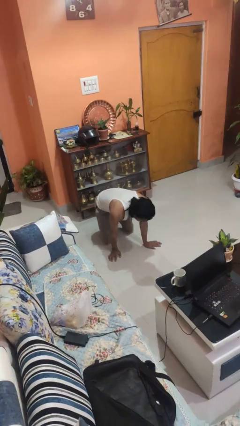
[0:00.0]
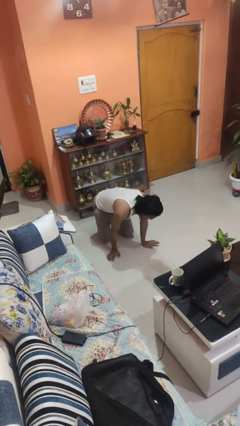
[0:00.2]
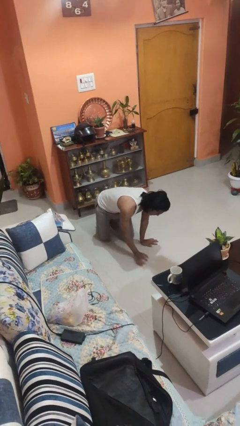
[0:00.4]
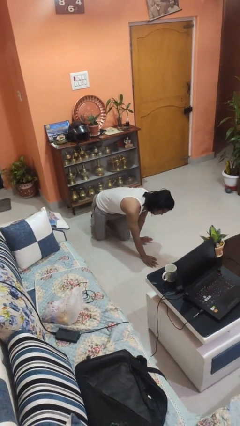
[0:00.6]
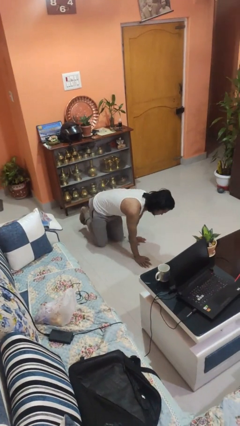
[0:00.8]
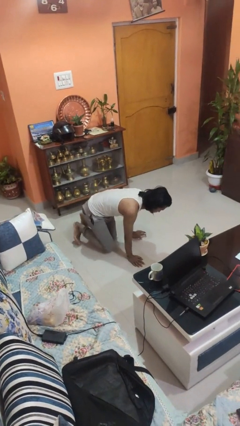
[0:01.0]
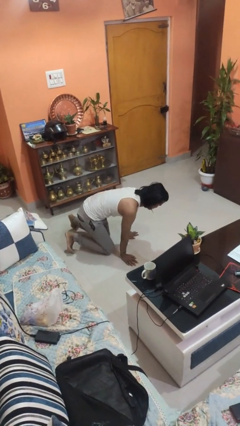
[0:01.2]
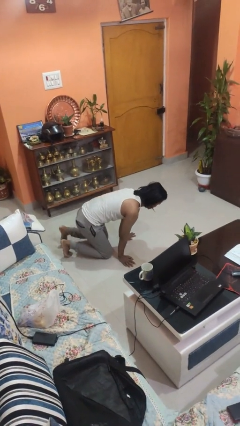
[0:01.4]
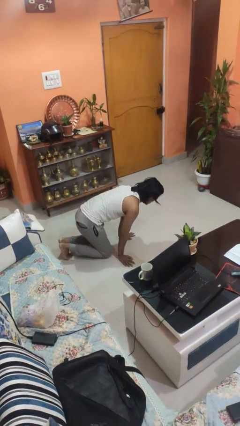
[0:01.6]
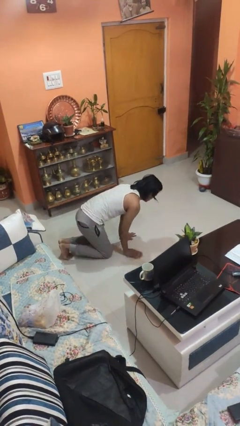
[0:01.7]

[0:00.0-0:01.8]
person crawls

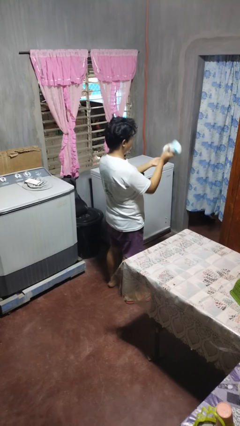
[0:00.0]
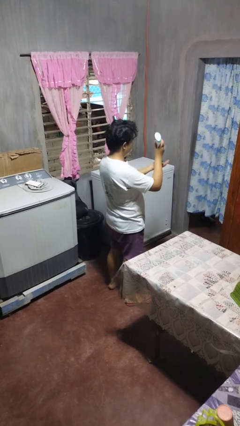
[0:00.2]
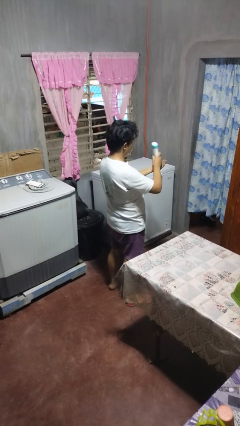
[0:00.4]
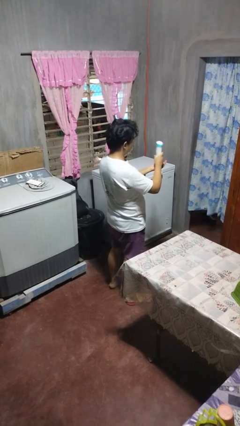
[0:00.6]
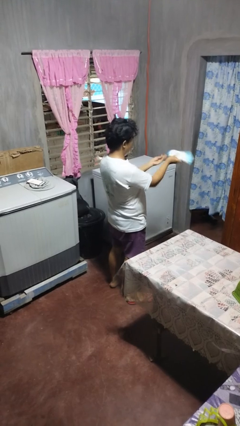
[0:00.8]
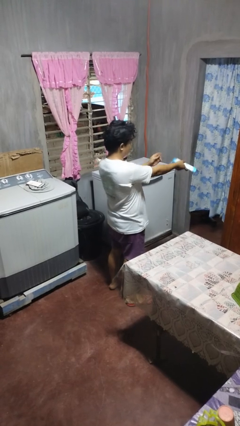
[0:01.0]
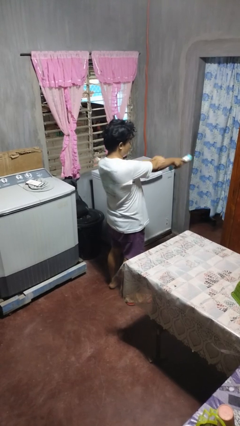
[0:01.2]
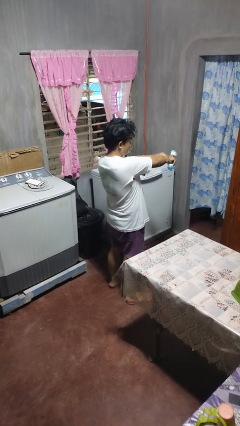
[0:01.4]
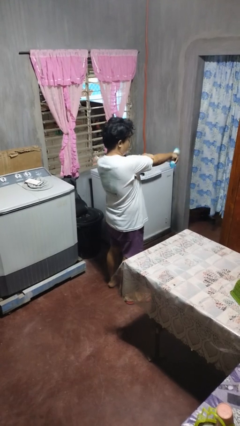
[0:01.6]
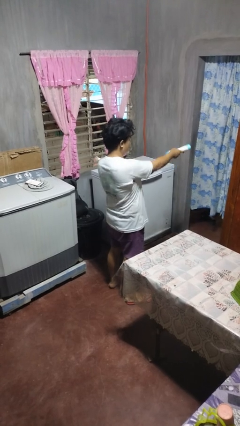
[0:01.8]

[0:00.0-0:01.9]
person applies sunscreen

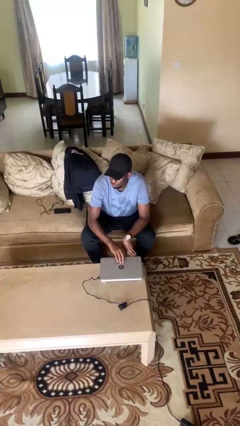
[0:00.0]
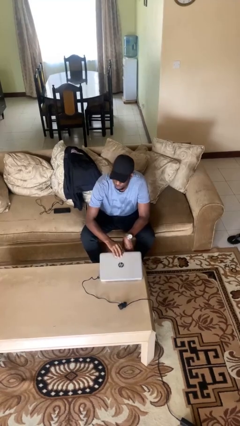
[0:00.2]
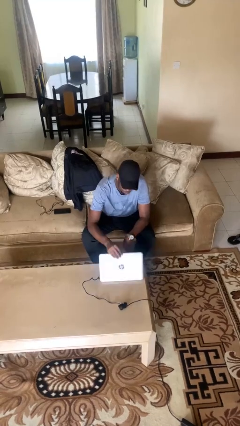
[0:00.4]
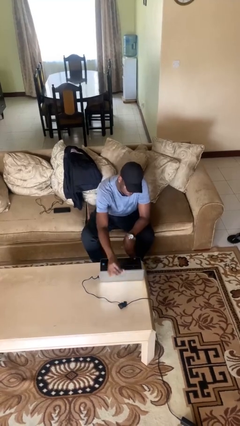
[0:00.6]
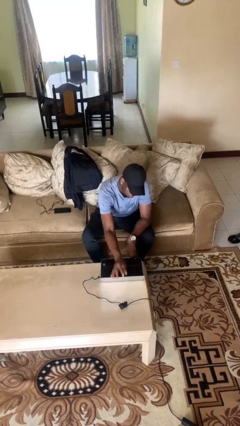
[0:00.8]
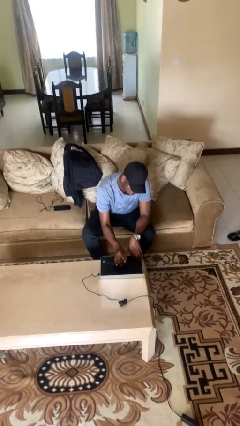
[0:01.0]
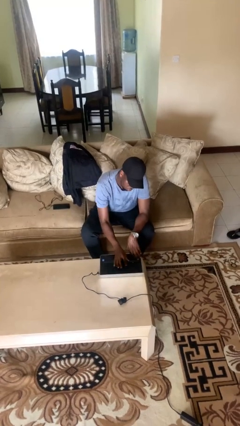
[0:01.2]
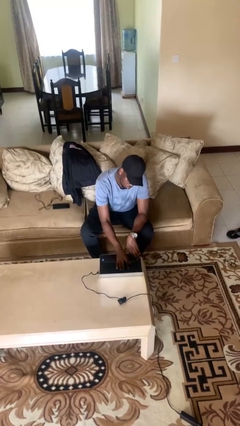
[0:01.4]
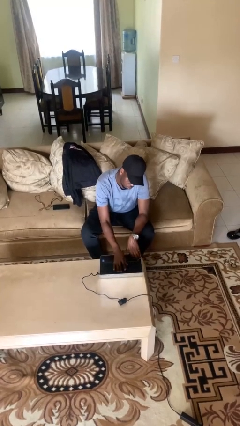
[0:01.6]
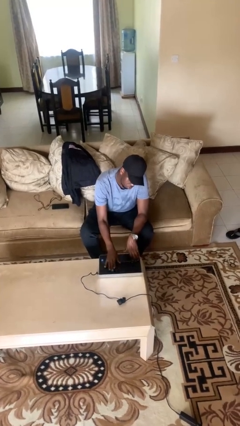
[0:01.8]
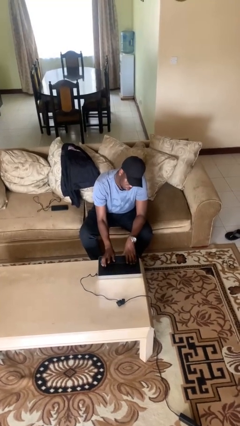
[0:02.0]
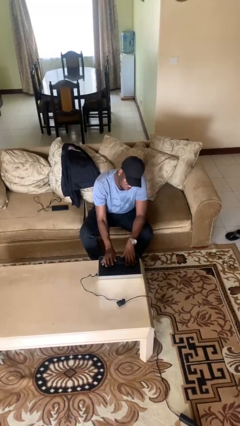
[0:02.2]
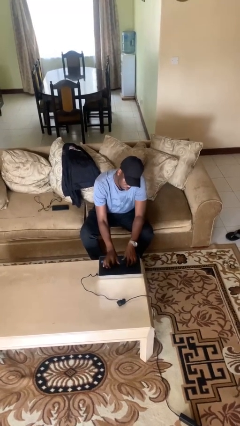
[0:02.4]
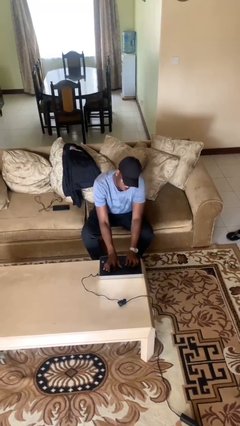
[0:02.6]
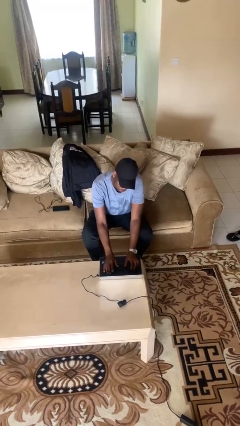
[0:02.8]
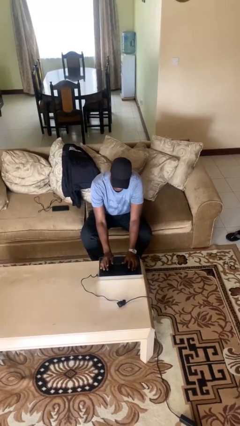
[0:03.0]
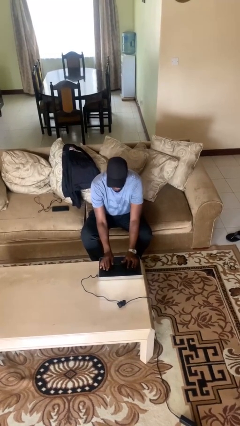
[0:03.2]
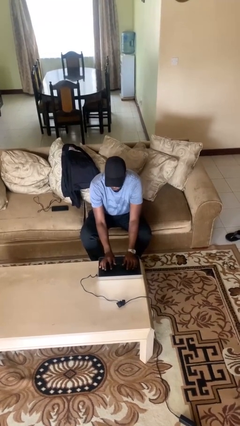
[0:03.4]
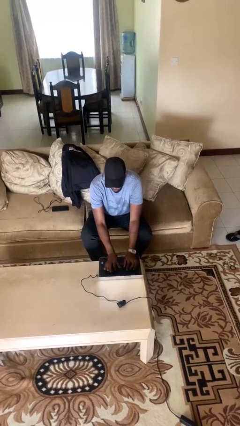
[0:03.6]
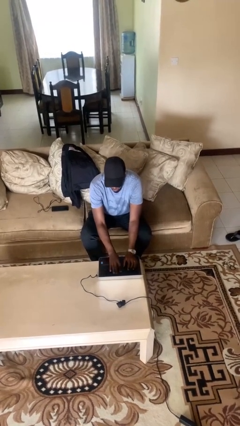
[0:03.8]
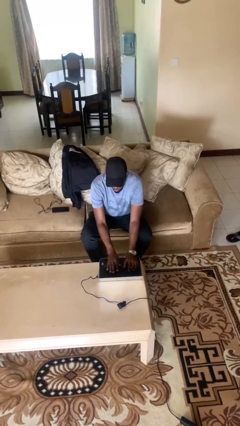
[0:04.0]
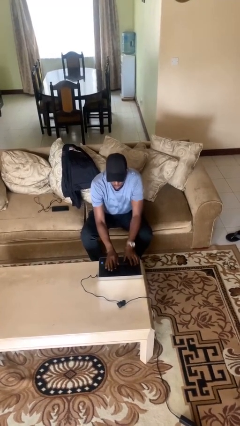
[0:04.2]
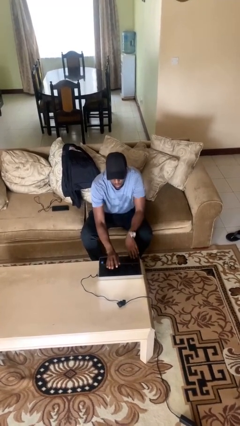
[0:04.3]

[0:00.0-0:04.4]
person interacts with laptop

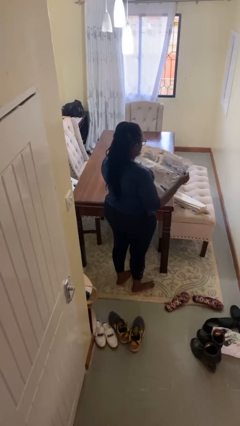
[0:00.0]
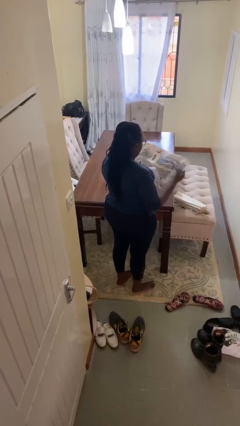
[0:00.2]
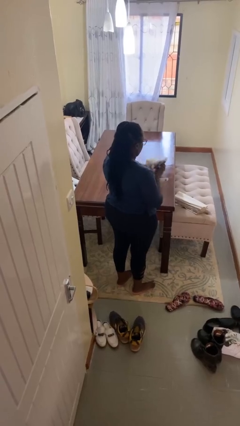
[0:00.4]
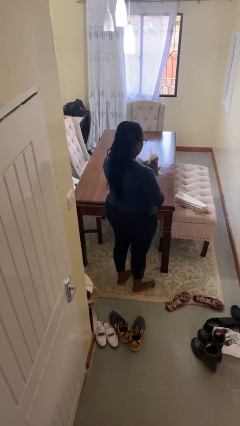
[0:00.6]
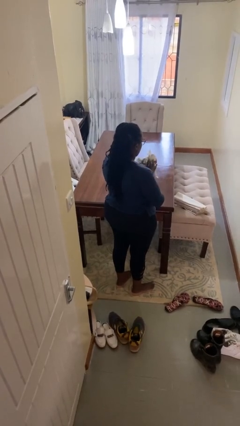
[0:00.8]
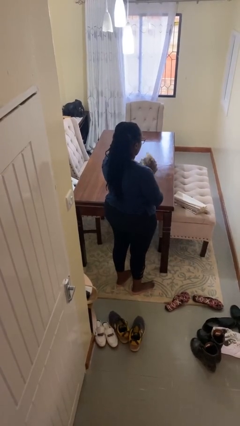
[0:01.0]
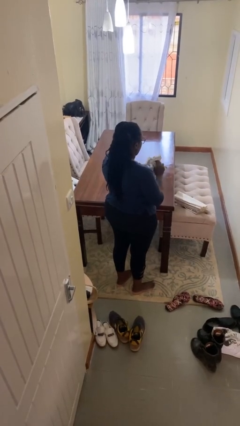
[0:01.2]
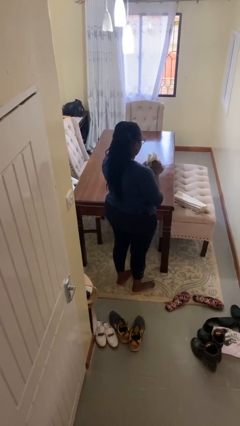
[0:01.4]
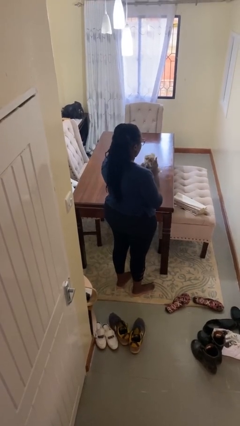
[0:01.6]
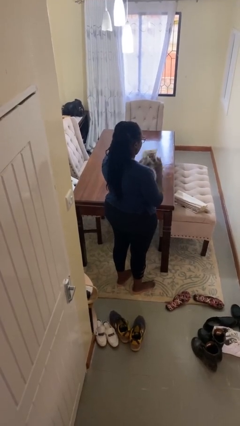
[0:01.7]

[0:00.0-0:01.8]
person crumples paper

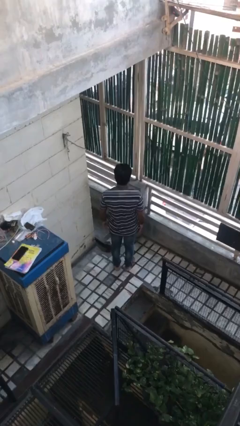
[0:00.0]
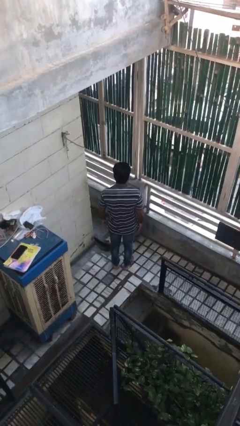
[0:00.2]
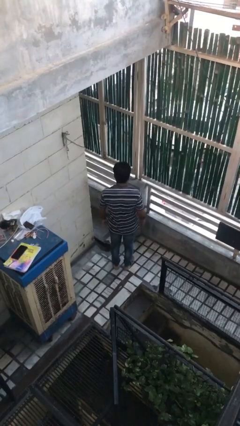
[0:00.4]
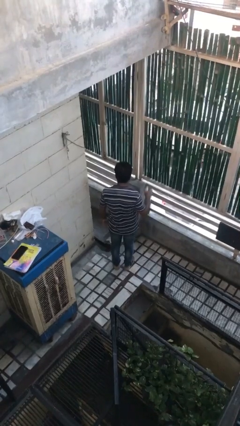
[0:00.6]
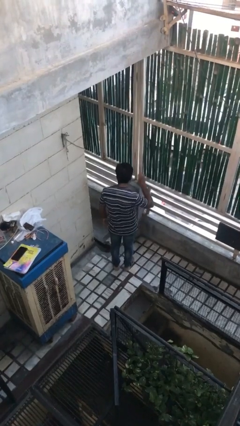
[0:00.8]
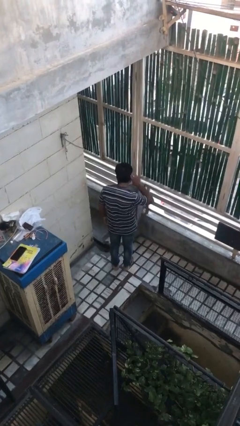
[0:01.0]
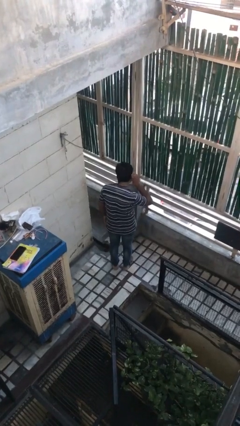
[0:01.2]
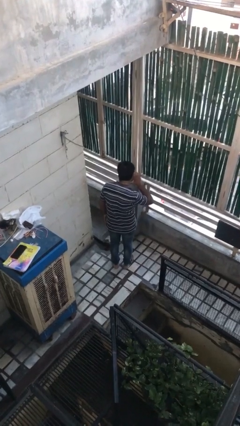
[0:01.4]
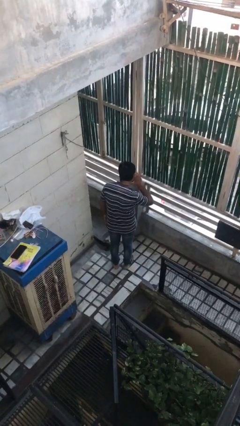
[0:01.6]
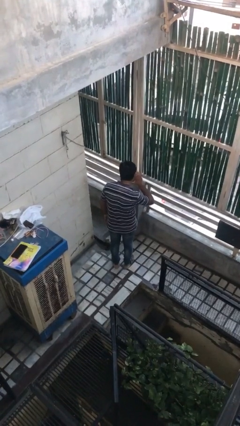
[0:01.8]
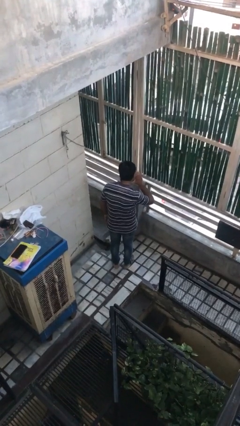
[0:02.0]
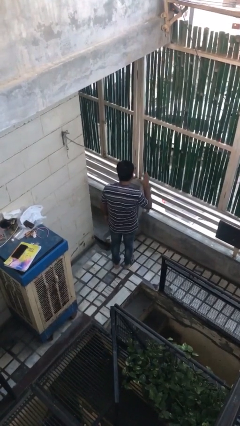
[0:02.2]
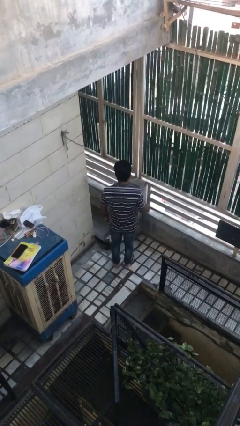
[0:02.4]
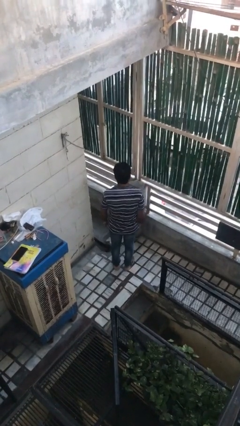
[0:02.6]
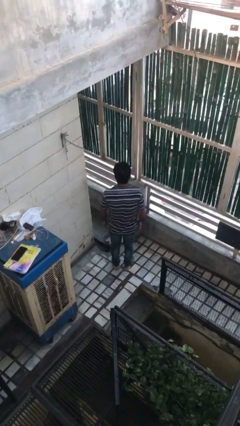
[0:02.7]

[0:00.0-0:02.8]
person gestures listen closely

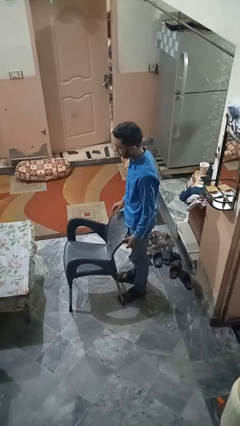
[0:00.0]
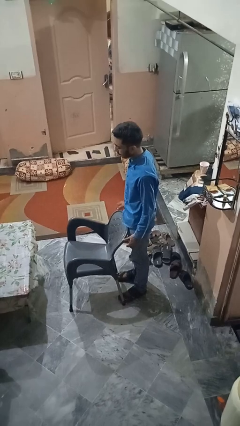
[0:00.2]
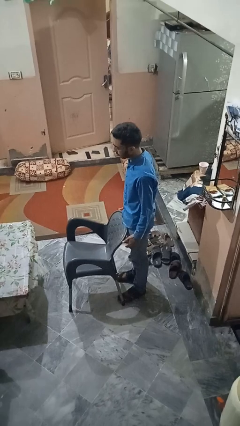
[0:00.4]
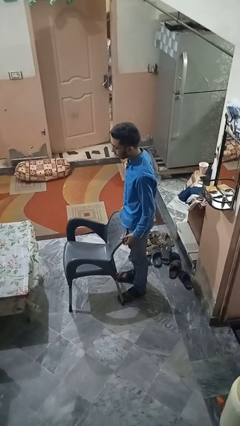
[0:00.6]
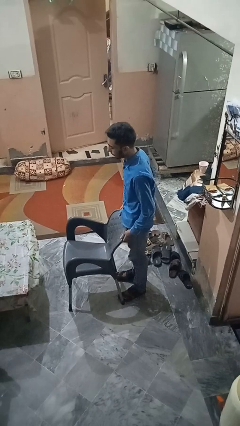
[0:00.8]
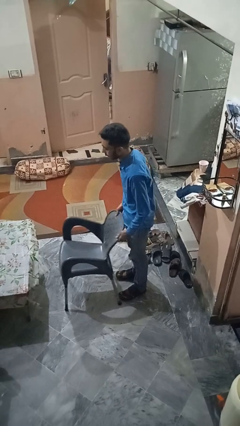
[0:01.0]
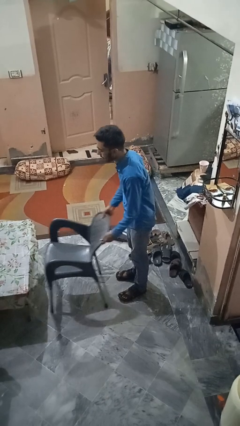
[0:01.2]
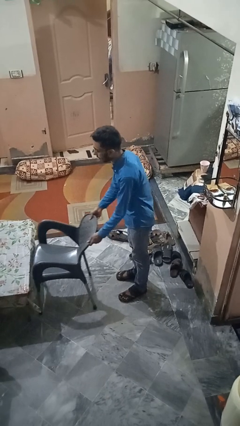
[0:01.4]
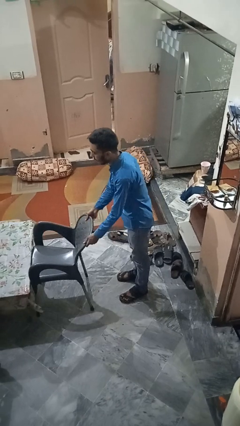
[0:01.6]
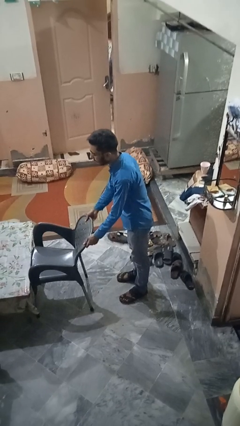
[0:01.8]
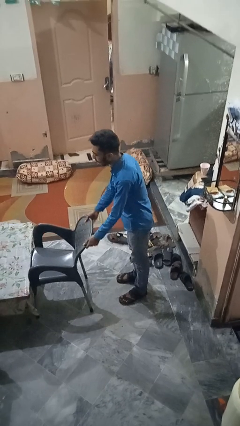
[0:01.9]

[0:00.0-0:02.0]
person pushes in chair

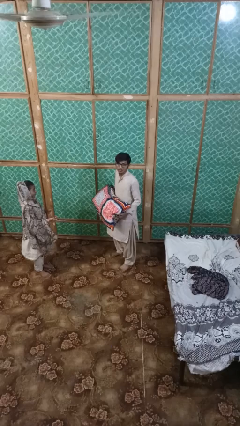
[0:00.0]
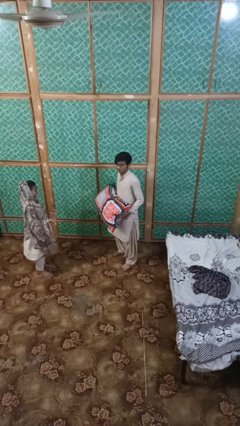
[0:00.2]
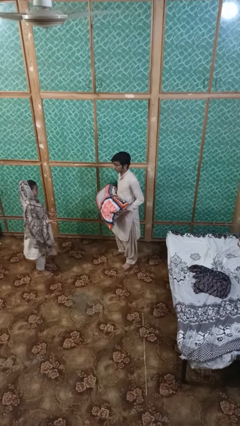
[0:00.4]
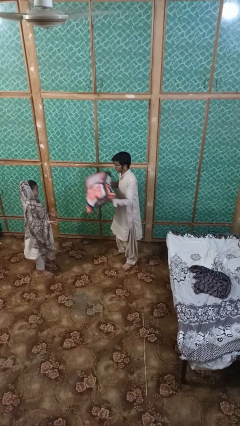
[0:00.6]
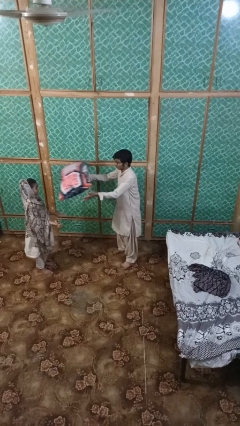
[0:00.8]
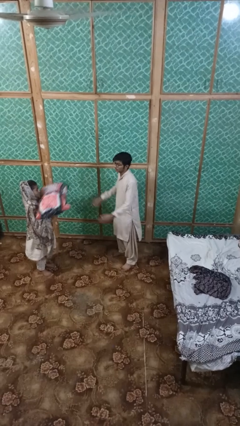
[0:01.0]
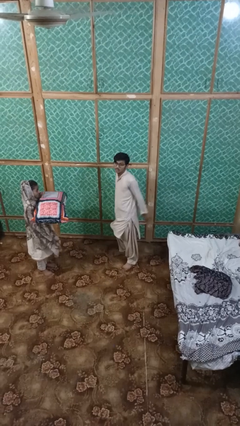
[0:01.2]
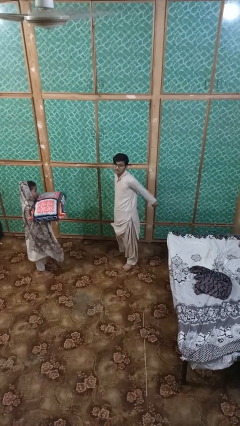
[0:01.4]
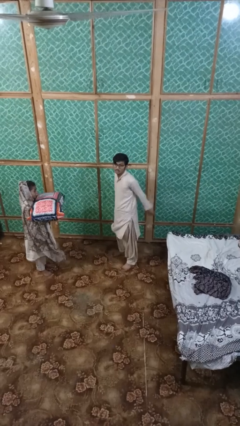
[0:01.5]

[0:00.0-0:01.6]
person throws object to person

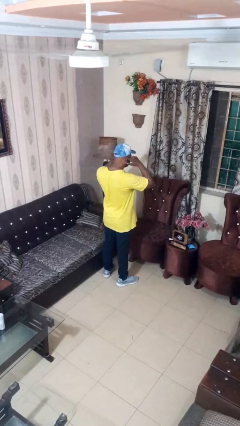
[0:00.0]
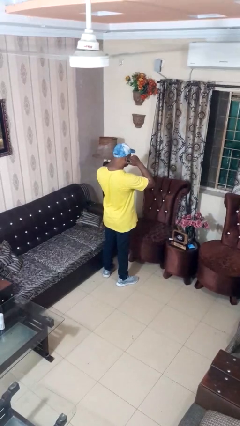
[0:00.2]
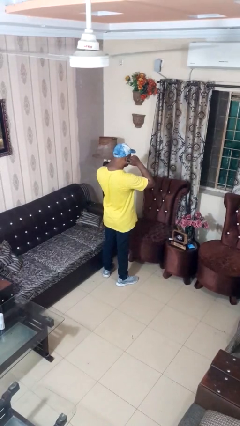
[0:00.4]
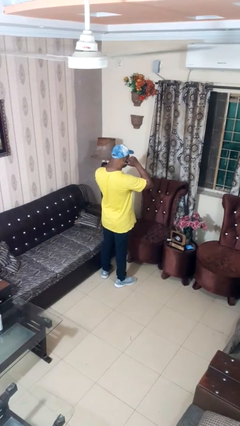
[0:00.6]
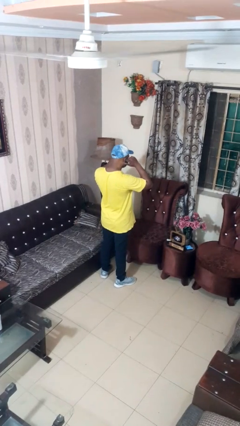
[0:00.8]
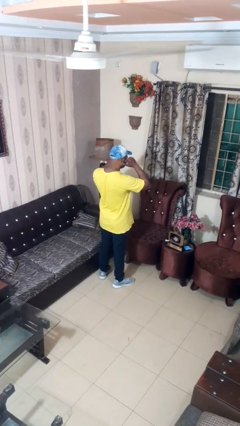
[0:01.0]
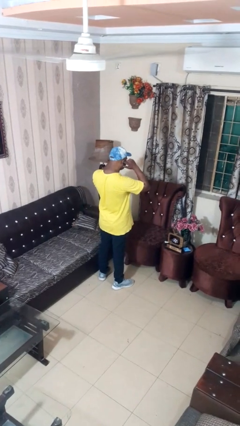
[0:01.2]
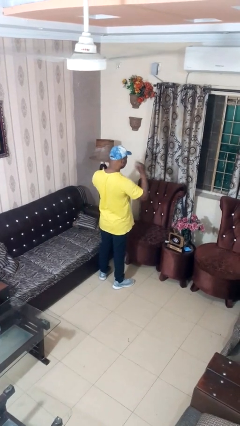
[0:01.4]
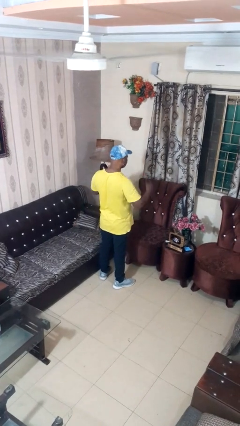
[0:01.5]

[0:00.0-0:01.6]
person puts fingers in ear
